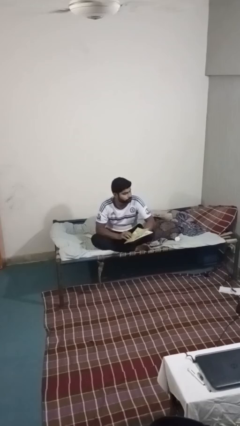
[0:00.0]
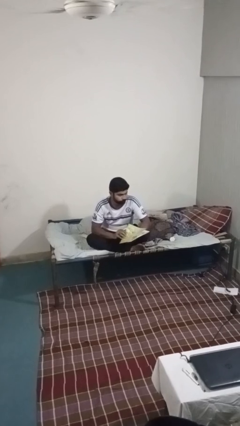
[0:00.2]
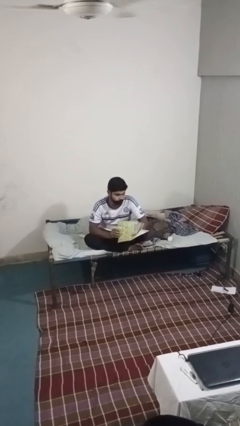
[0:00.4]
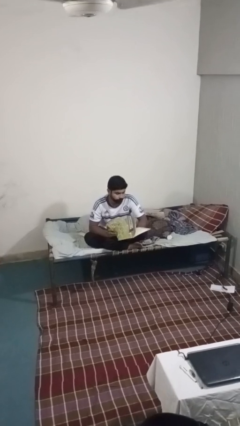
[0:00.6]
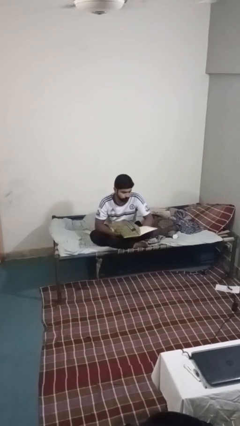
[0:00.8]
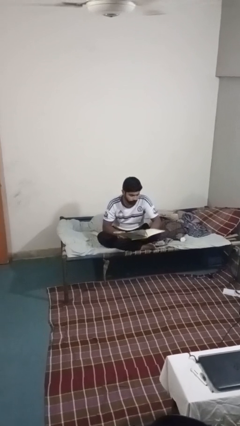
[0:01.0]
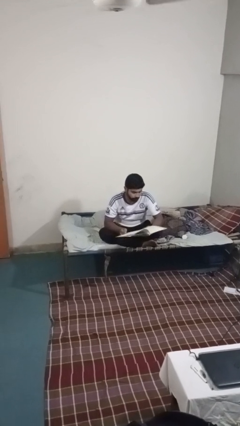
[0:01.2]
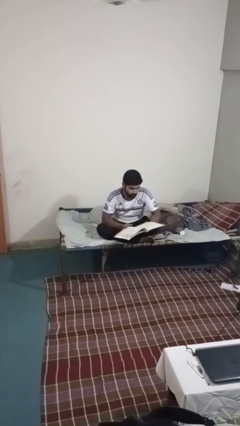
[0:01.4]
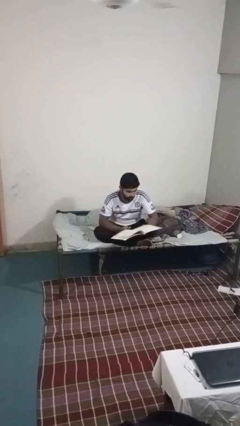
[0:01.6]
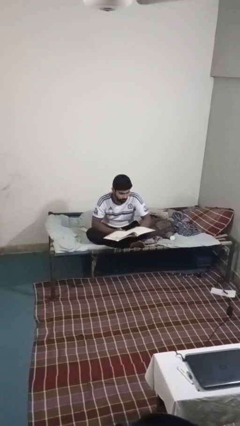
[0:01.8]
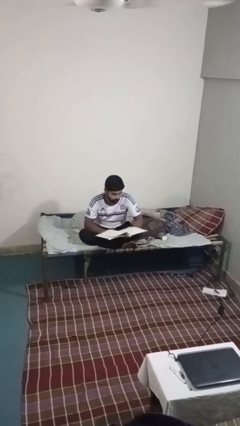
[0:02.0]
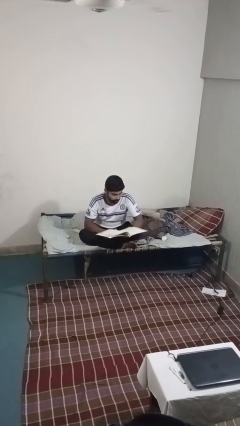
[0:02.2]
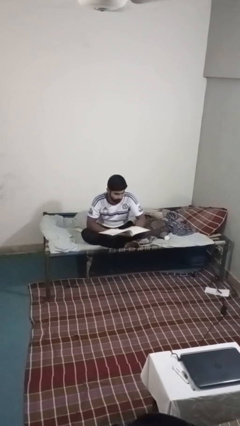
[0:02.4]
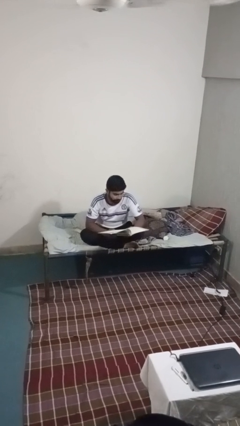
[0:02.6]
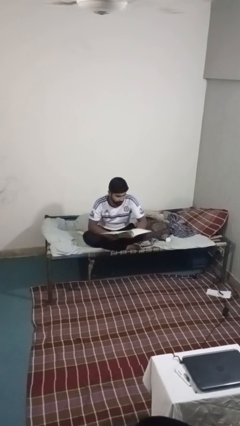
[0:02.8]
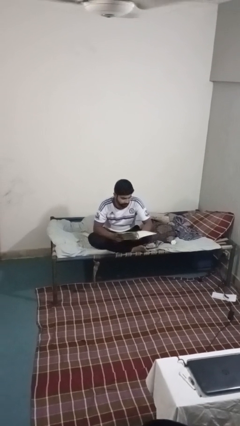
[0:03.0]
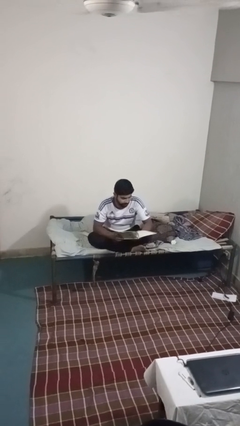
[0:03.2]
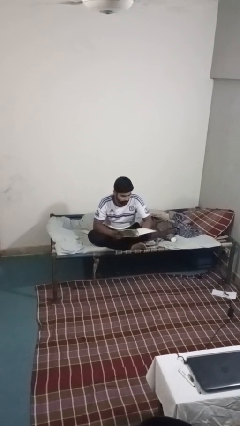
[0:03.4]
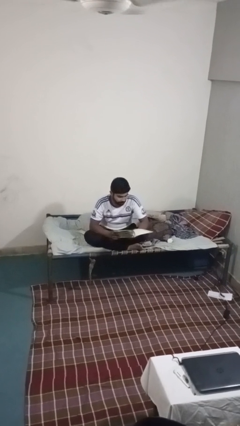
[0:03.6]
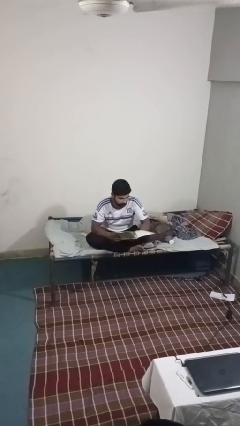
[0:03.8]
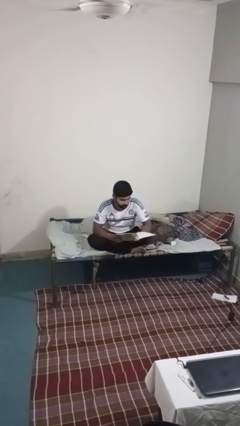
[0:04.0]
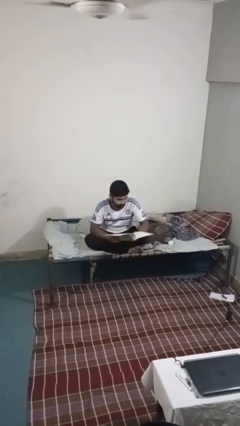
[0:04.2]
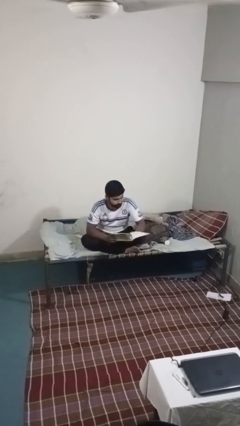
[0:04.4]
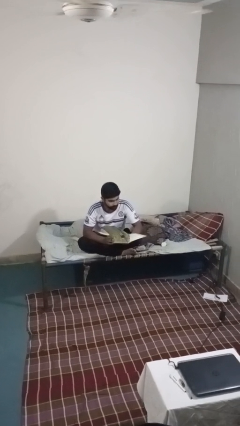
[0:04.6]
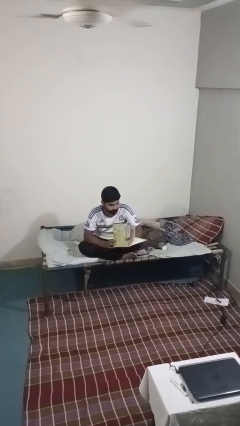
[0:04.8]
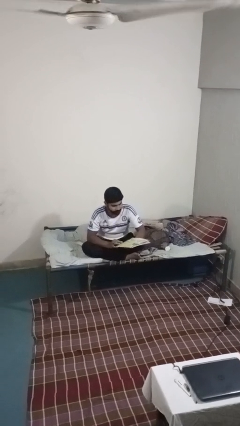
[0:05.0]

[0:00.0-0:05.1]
person reads magazine

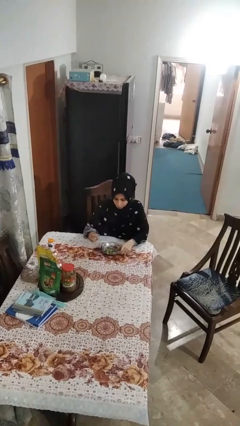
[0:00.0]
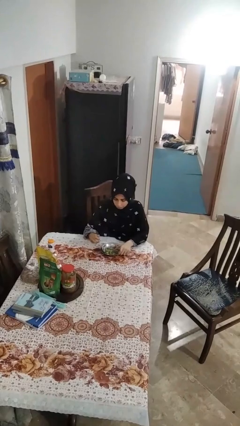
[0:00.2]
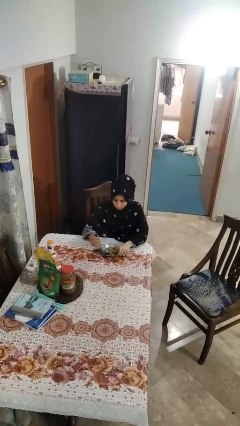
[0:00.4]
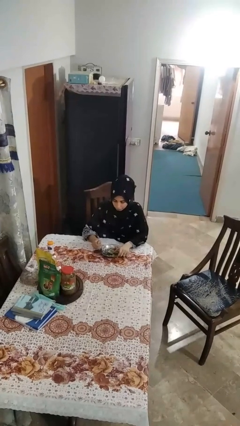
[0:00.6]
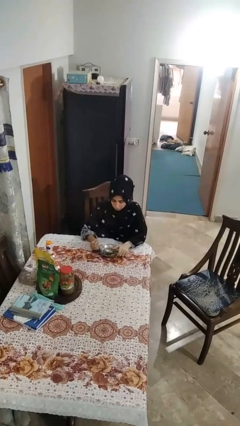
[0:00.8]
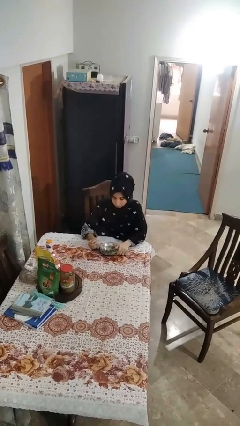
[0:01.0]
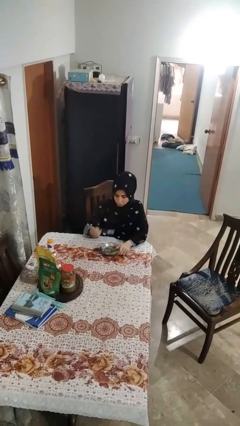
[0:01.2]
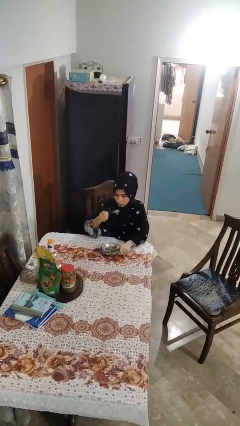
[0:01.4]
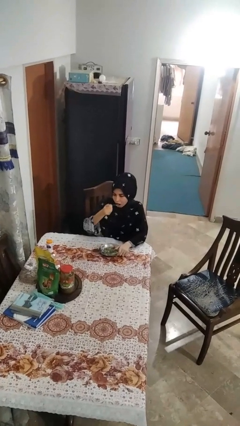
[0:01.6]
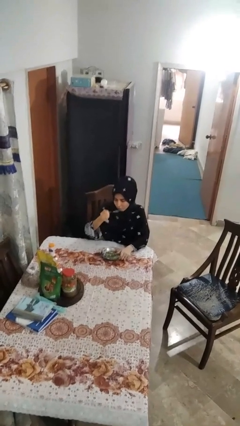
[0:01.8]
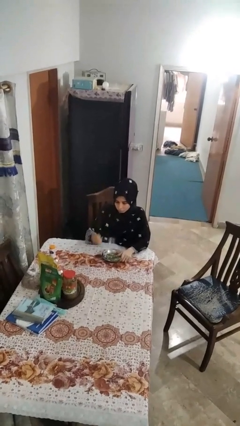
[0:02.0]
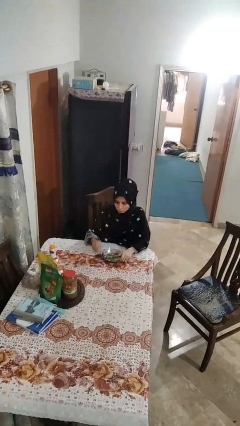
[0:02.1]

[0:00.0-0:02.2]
person eats with utensil

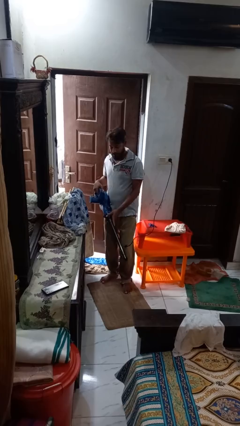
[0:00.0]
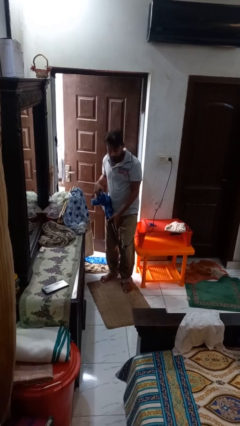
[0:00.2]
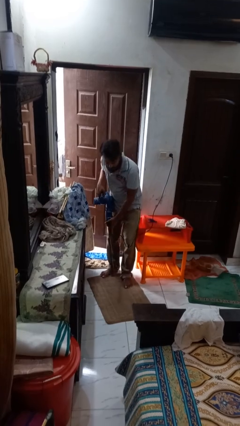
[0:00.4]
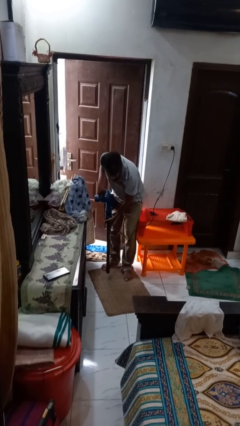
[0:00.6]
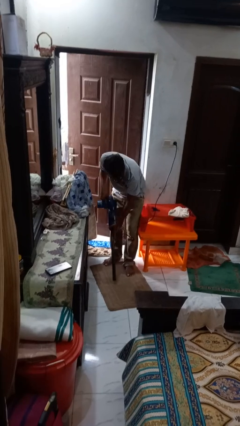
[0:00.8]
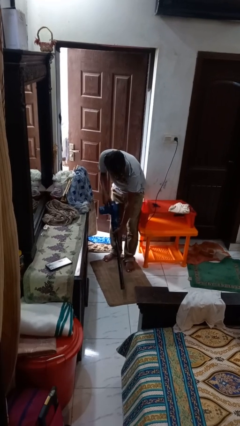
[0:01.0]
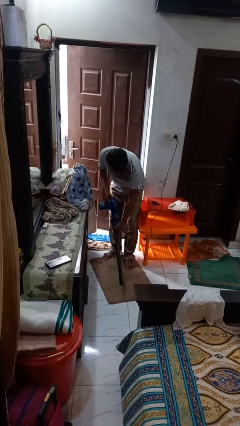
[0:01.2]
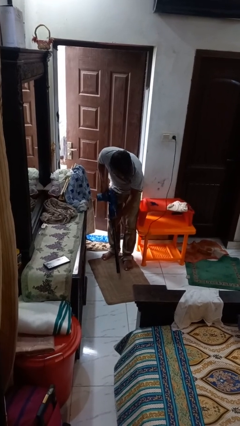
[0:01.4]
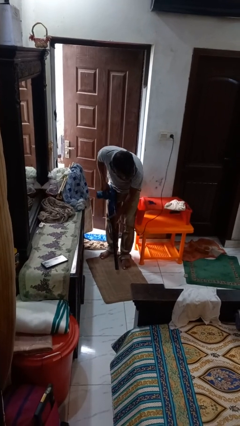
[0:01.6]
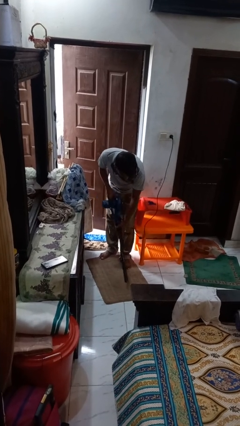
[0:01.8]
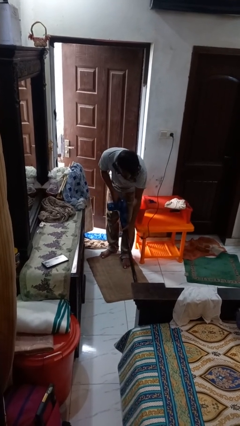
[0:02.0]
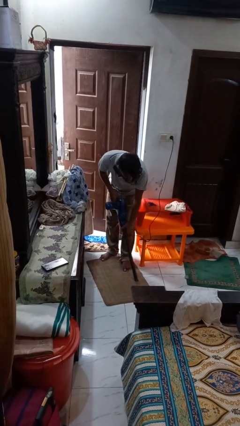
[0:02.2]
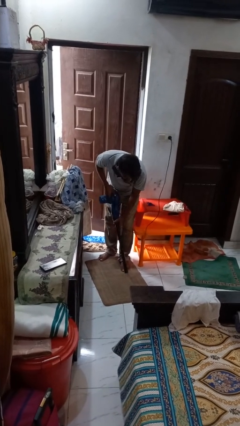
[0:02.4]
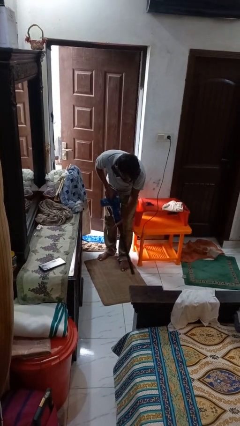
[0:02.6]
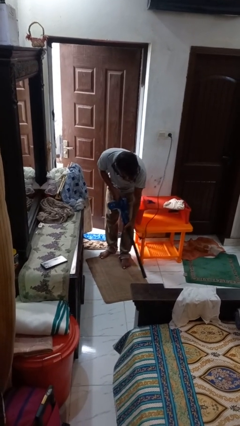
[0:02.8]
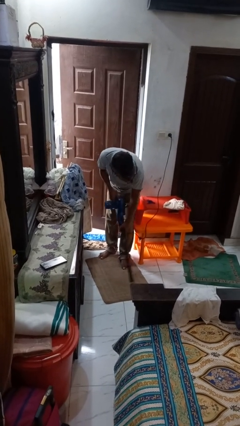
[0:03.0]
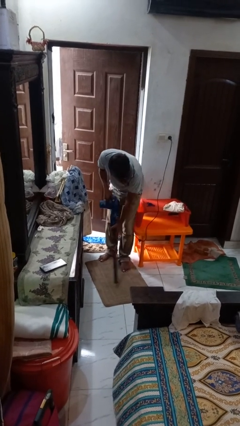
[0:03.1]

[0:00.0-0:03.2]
person vacuums carpet

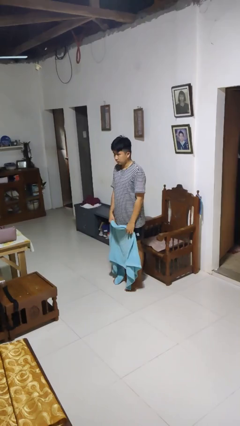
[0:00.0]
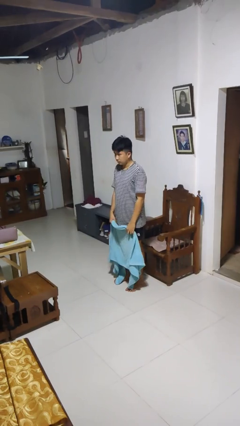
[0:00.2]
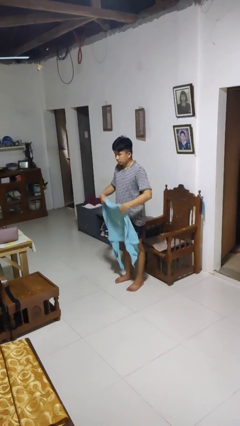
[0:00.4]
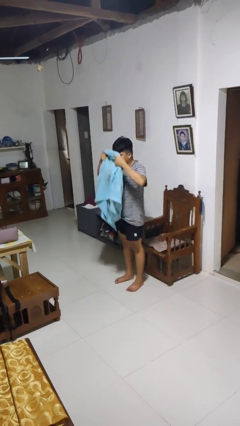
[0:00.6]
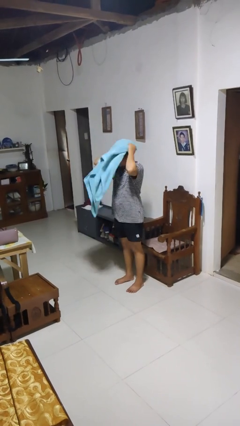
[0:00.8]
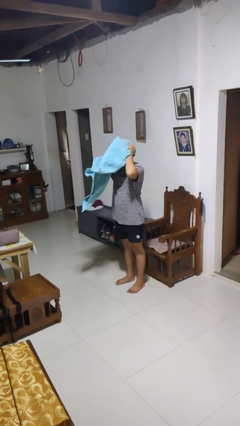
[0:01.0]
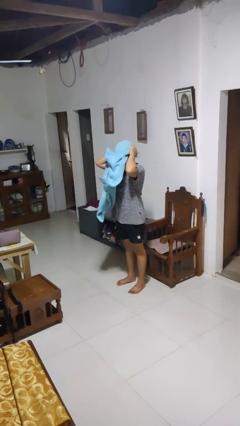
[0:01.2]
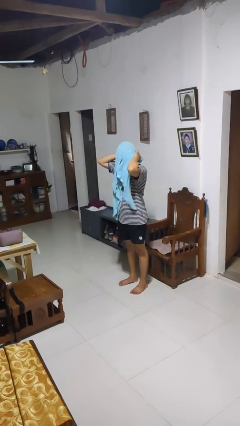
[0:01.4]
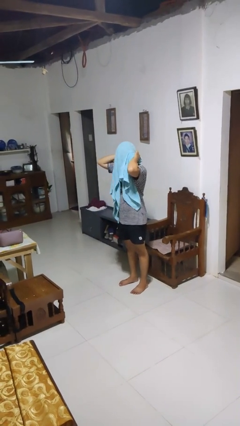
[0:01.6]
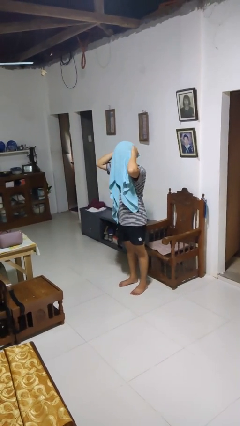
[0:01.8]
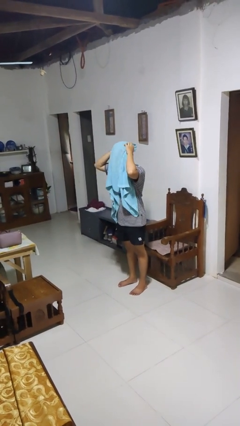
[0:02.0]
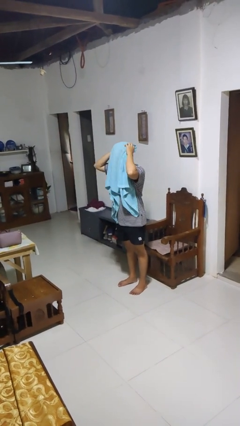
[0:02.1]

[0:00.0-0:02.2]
person dries hair with towel

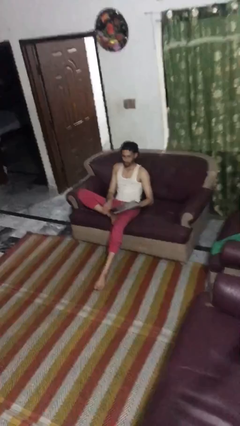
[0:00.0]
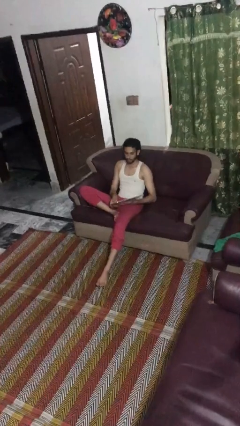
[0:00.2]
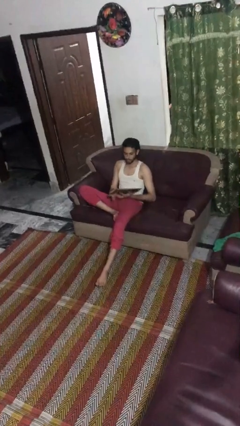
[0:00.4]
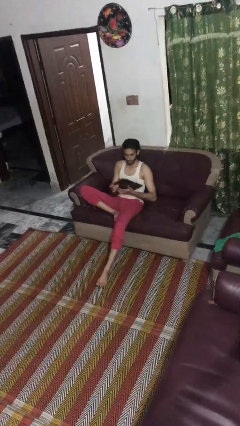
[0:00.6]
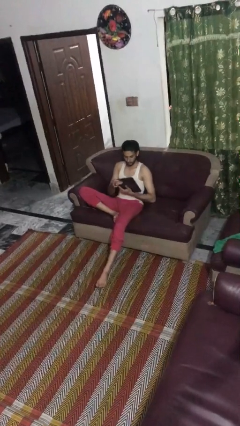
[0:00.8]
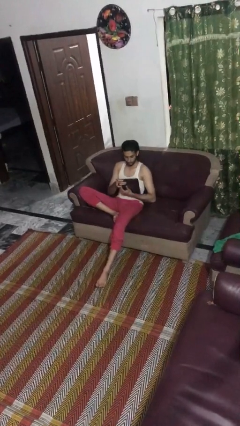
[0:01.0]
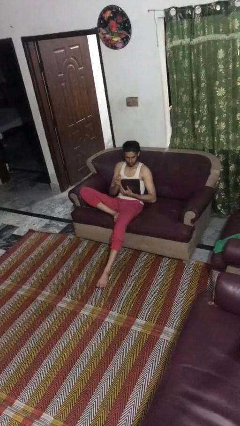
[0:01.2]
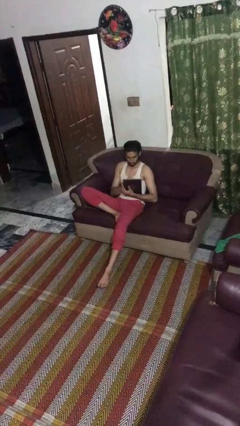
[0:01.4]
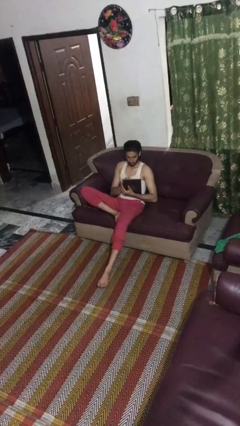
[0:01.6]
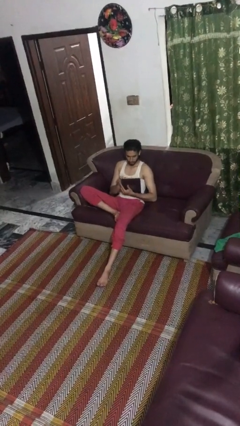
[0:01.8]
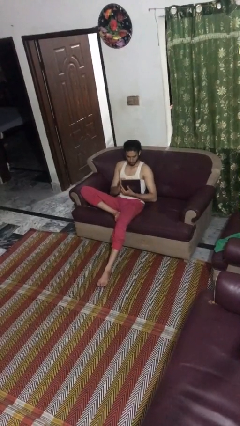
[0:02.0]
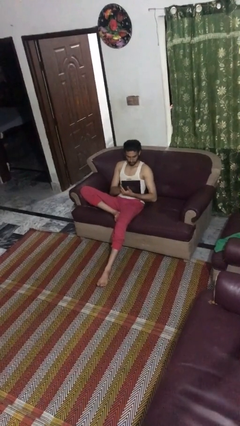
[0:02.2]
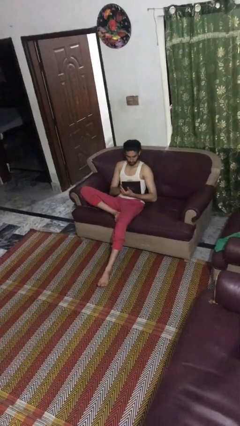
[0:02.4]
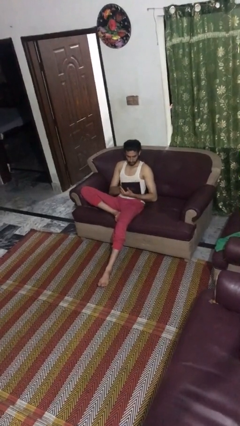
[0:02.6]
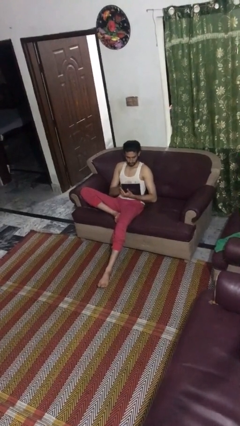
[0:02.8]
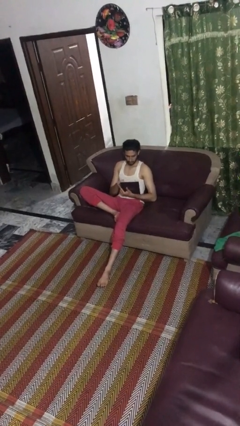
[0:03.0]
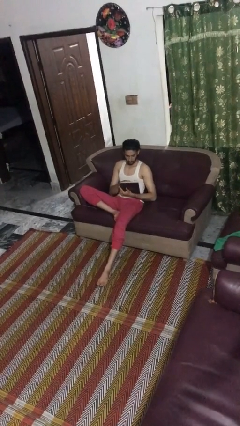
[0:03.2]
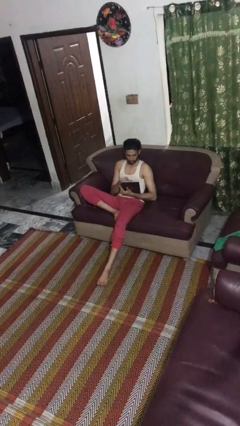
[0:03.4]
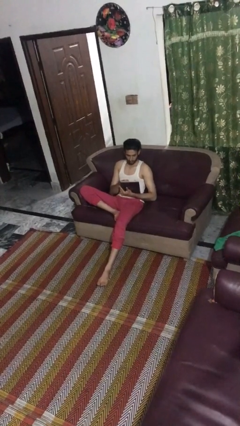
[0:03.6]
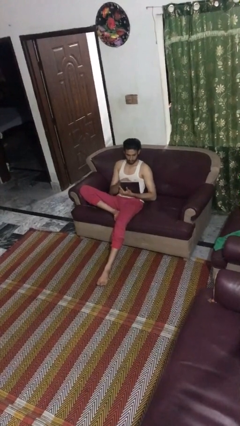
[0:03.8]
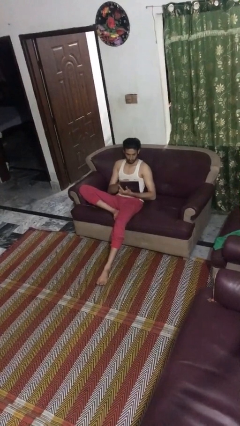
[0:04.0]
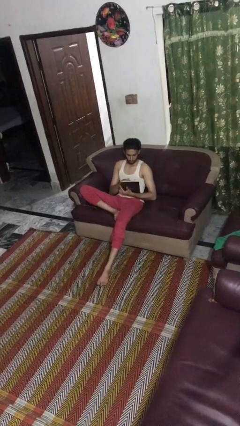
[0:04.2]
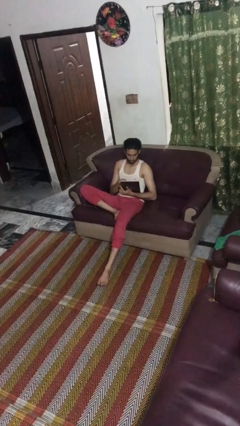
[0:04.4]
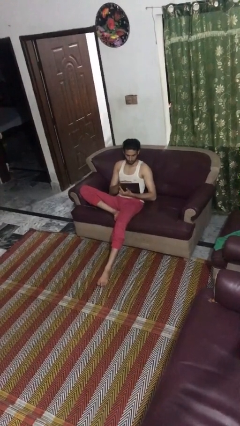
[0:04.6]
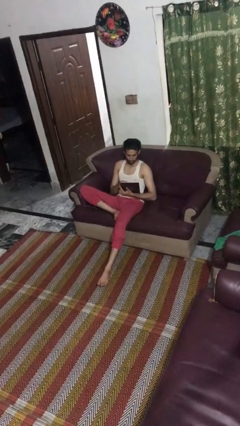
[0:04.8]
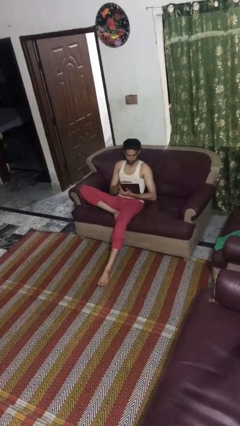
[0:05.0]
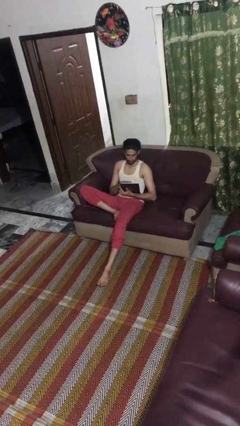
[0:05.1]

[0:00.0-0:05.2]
person interacts with tablet
